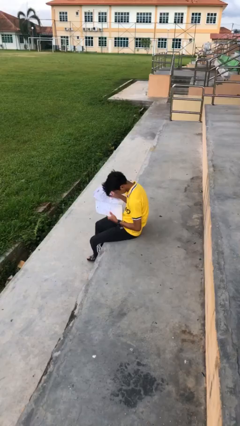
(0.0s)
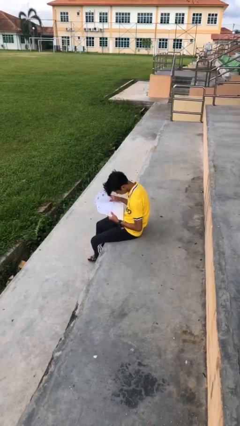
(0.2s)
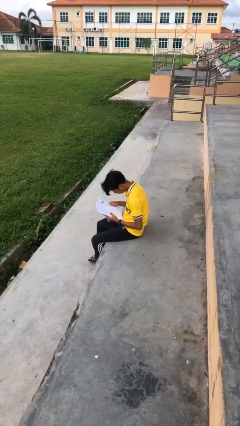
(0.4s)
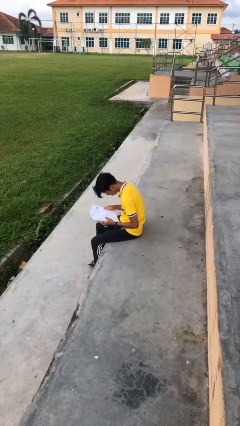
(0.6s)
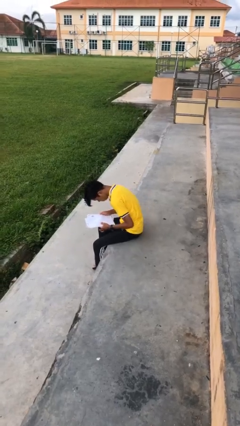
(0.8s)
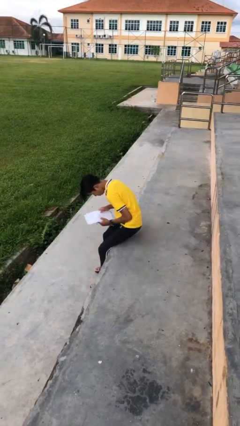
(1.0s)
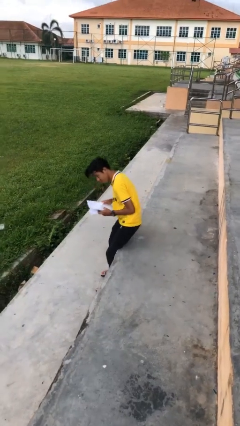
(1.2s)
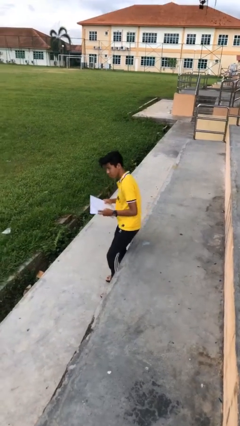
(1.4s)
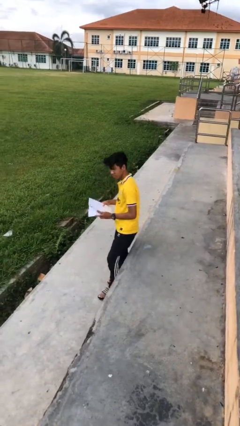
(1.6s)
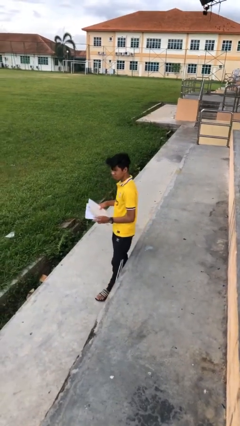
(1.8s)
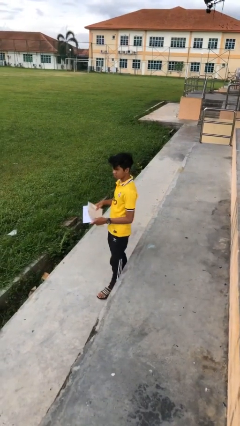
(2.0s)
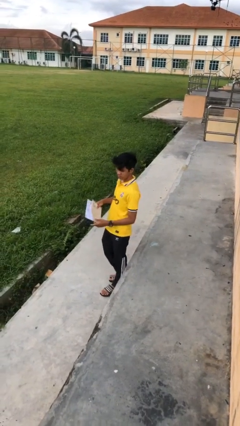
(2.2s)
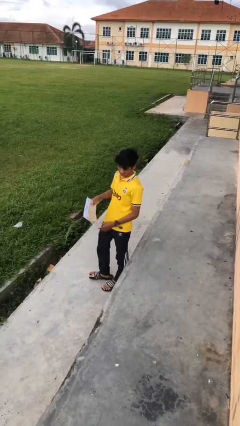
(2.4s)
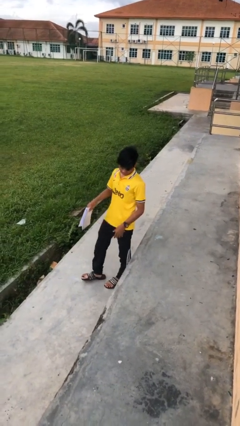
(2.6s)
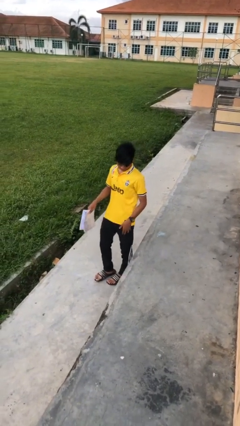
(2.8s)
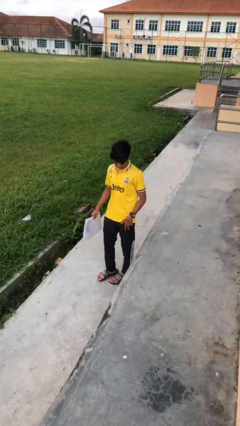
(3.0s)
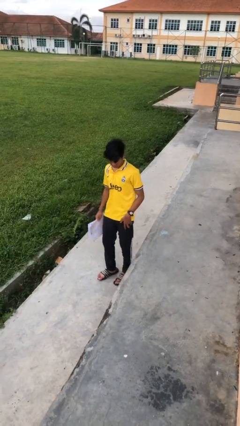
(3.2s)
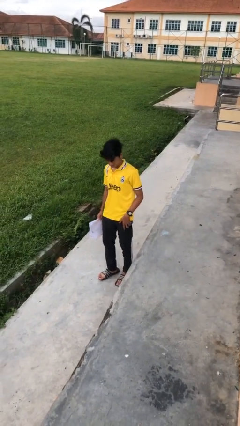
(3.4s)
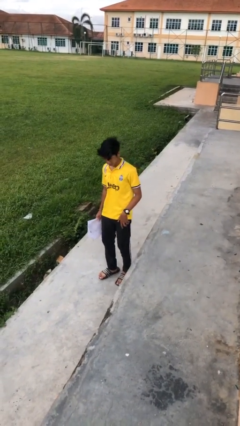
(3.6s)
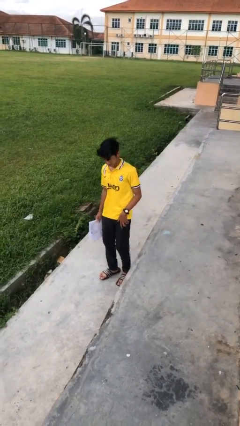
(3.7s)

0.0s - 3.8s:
person stands up

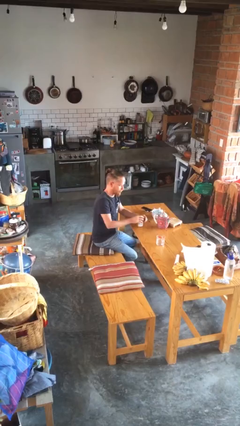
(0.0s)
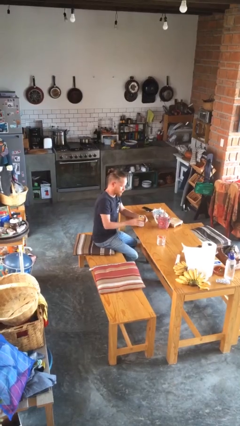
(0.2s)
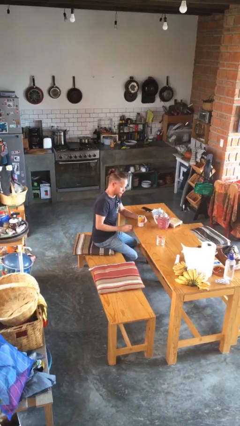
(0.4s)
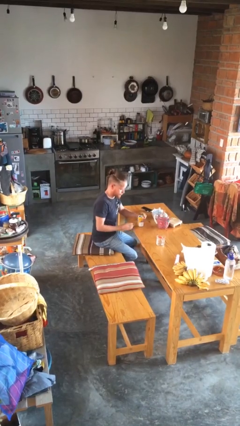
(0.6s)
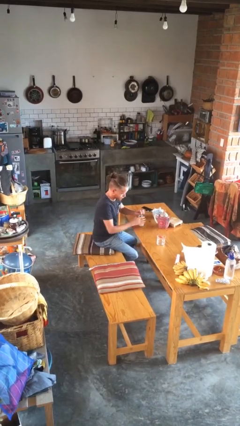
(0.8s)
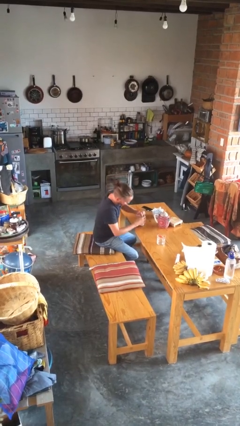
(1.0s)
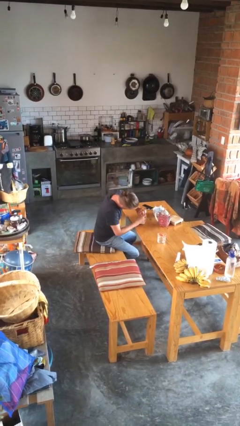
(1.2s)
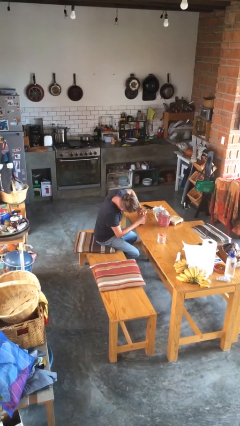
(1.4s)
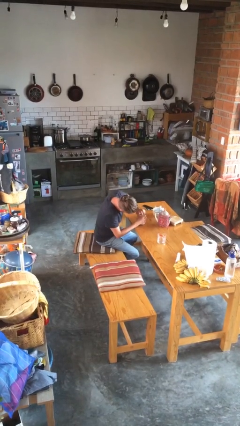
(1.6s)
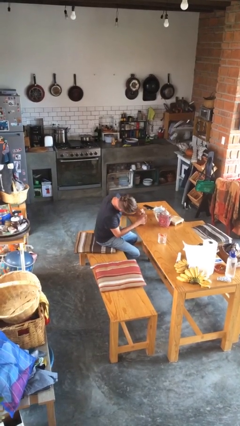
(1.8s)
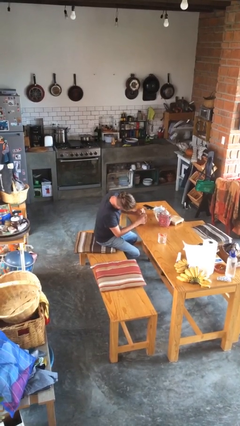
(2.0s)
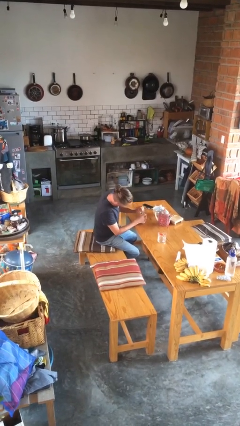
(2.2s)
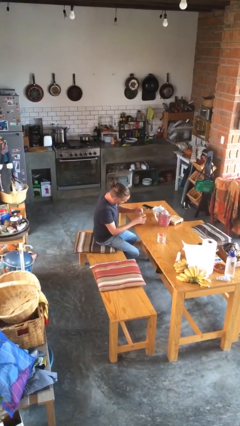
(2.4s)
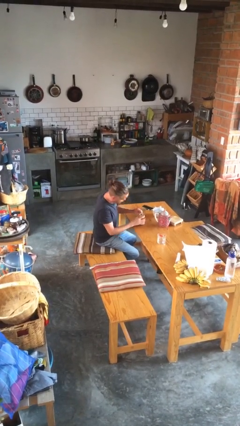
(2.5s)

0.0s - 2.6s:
person opens beverage can

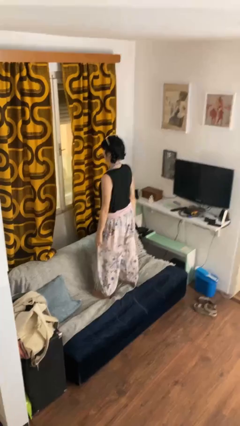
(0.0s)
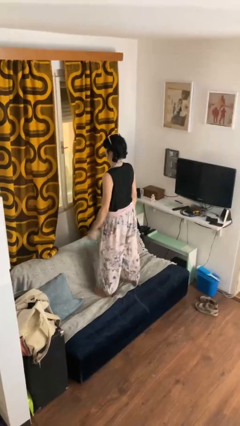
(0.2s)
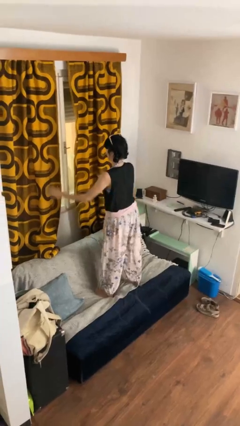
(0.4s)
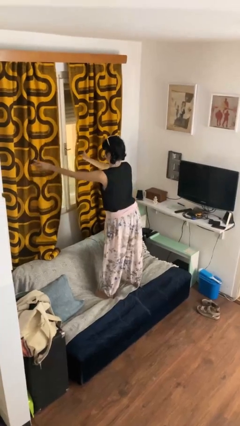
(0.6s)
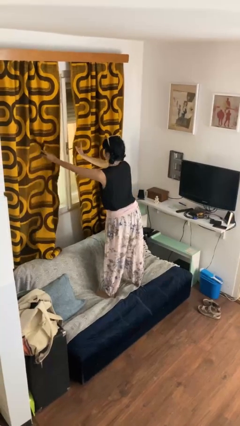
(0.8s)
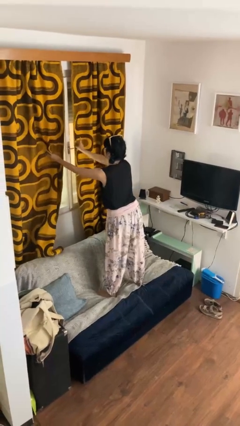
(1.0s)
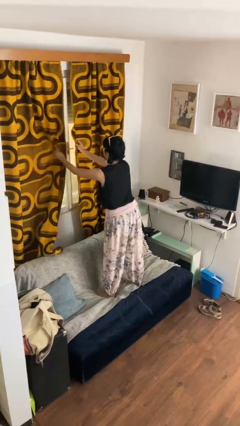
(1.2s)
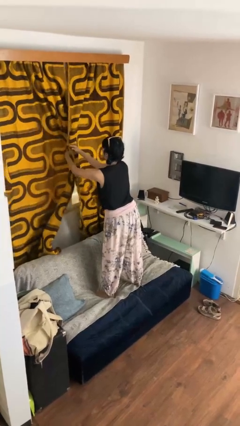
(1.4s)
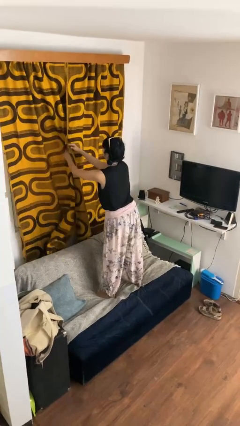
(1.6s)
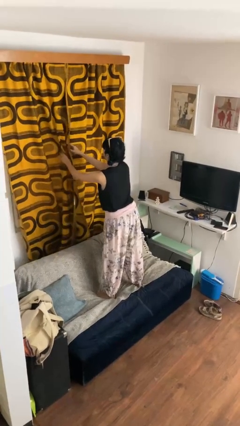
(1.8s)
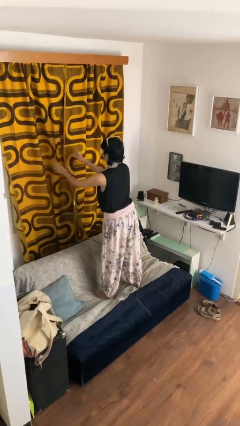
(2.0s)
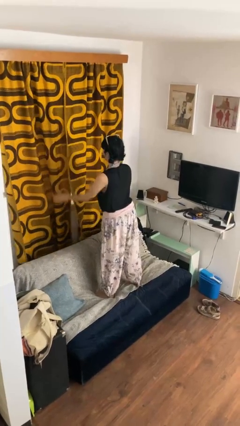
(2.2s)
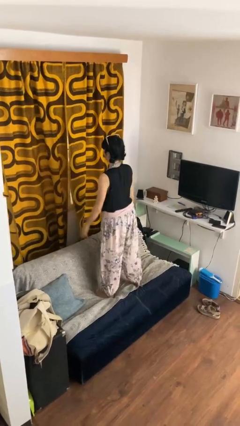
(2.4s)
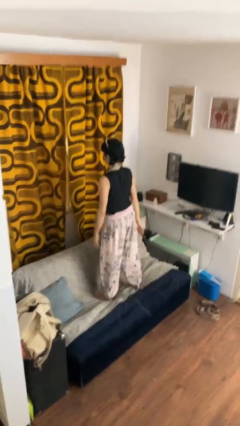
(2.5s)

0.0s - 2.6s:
person closes curtains

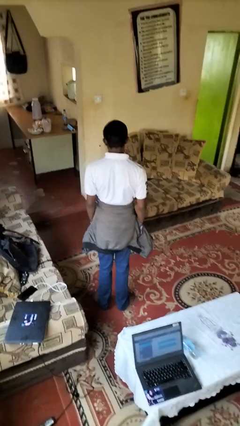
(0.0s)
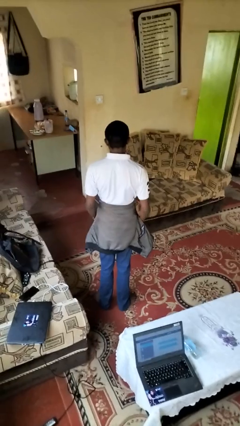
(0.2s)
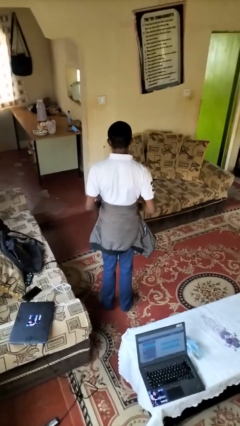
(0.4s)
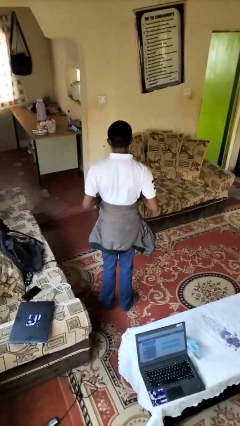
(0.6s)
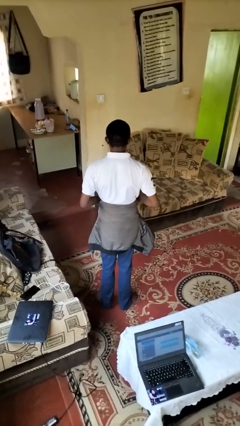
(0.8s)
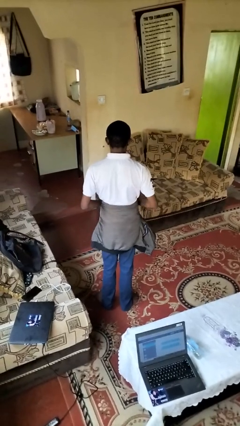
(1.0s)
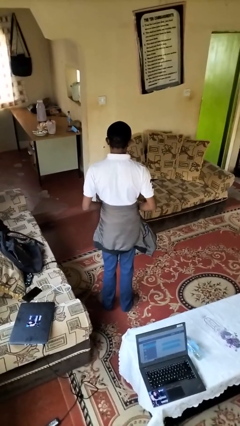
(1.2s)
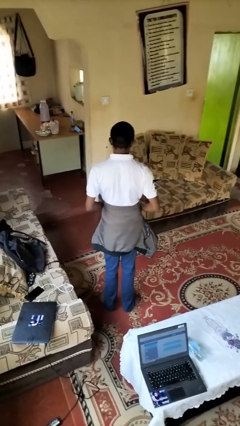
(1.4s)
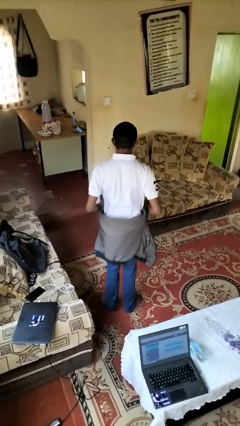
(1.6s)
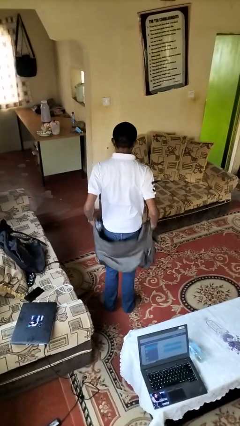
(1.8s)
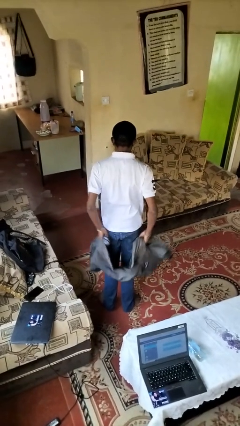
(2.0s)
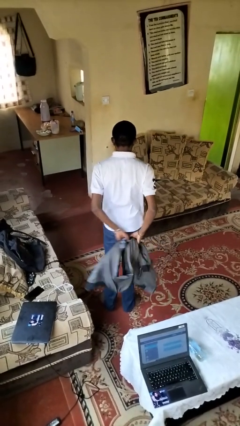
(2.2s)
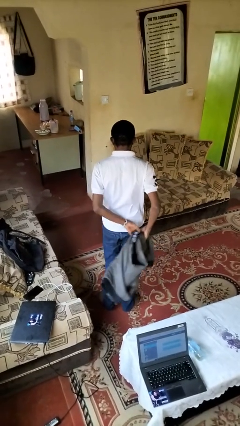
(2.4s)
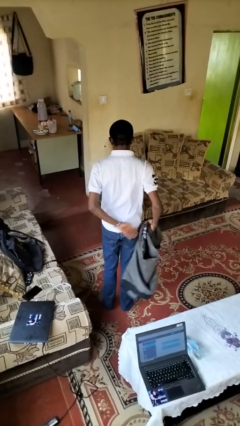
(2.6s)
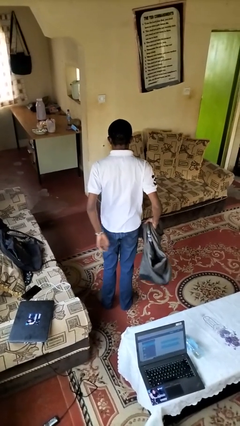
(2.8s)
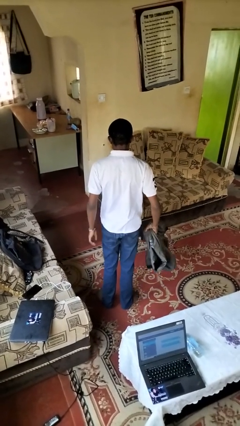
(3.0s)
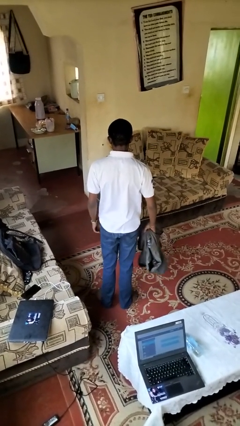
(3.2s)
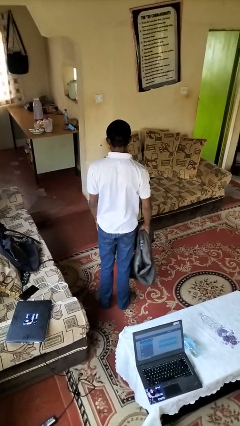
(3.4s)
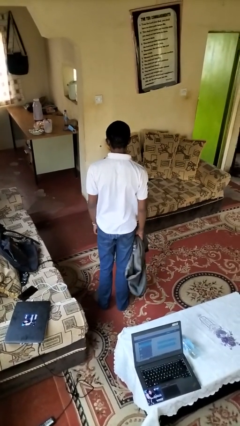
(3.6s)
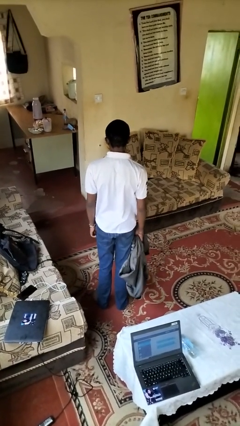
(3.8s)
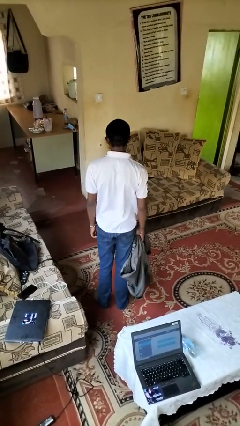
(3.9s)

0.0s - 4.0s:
person unties jacket around waist

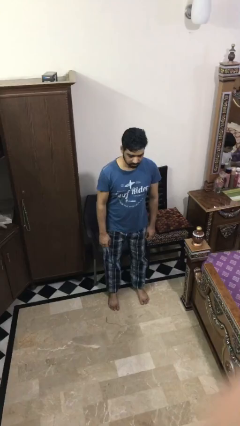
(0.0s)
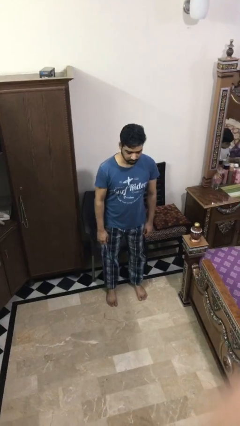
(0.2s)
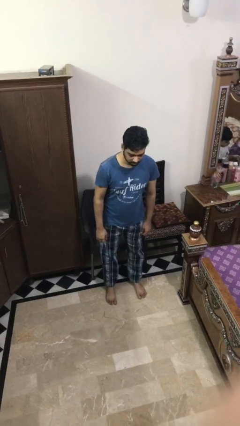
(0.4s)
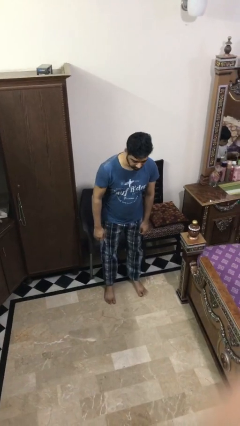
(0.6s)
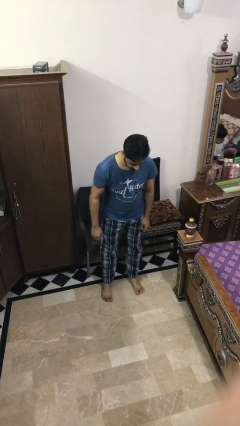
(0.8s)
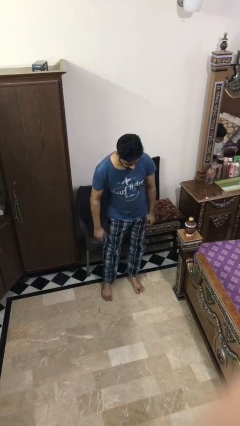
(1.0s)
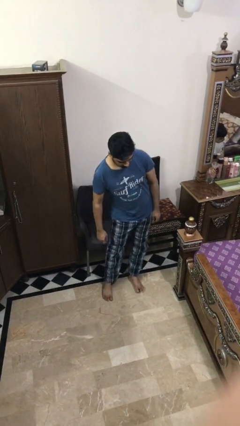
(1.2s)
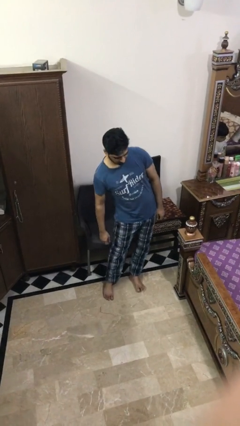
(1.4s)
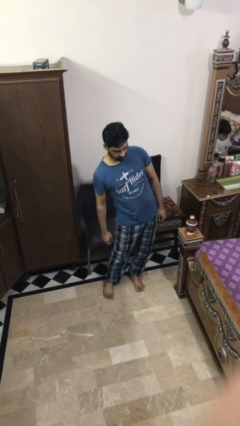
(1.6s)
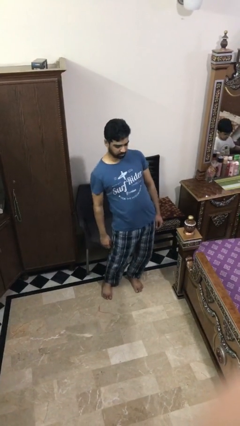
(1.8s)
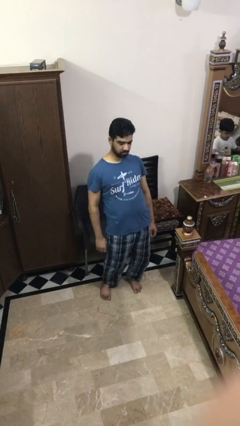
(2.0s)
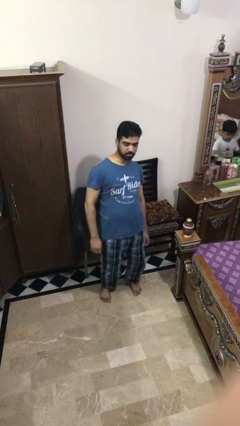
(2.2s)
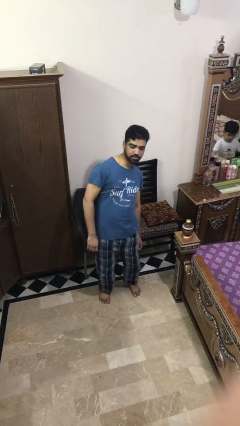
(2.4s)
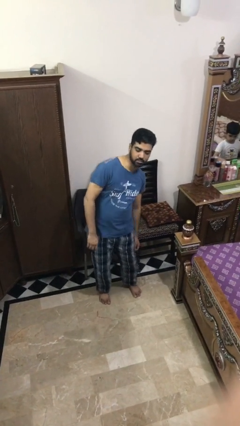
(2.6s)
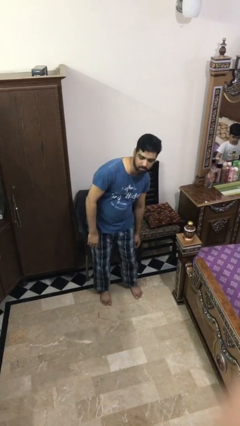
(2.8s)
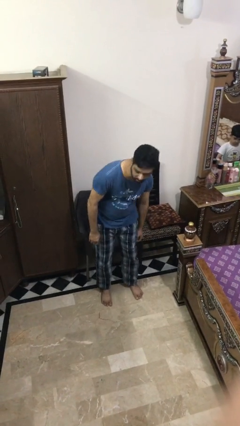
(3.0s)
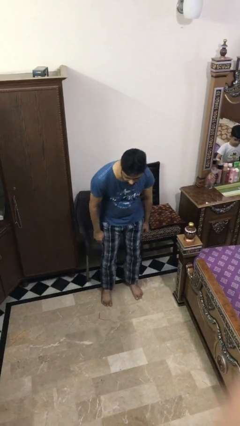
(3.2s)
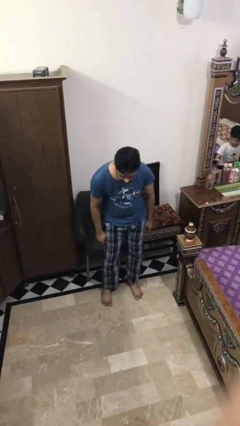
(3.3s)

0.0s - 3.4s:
person wiggles hips

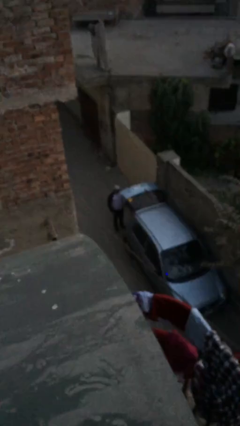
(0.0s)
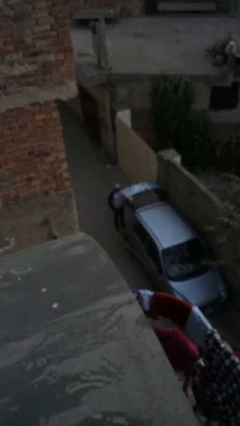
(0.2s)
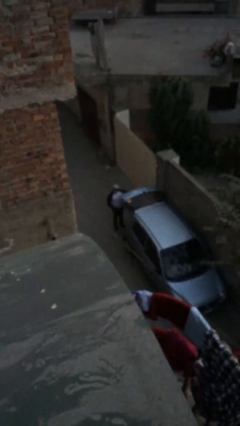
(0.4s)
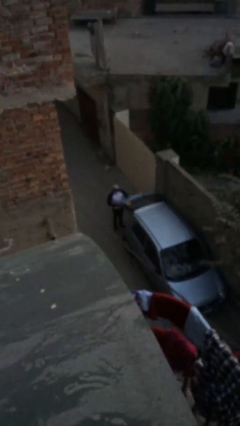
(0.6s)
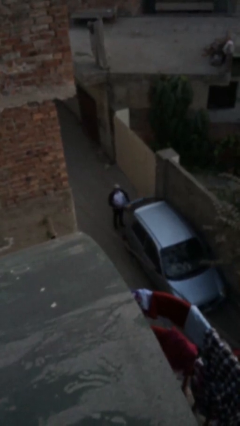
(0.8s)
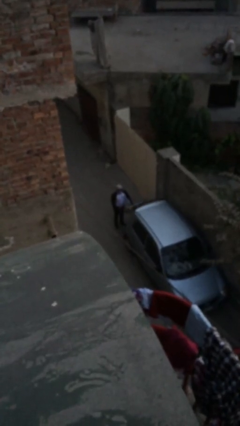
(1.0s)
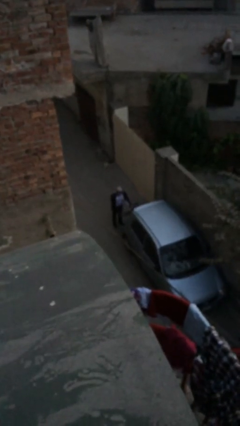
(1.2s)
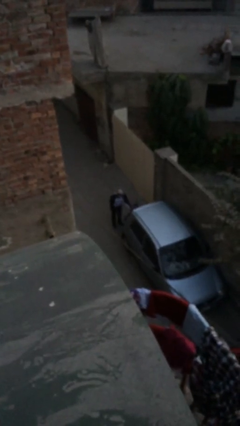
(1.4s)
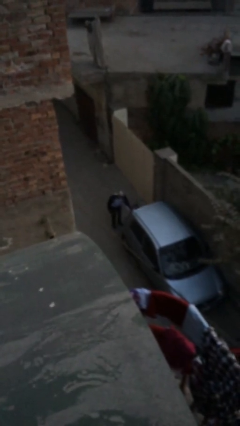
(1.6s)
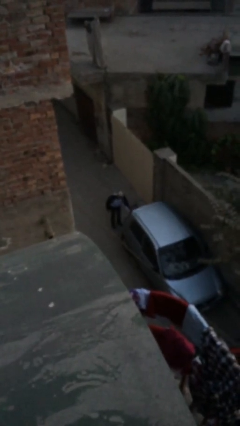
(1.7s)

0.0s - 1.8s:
person closes car trunk
